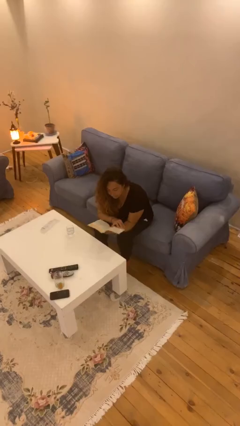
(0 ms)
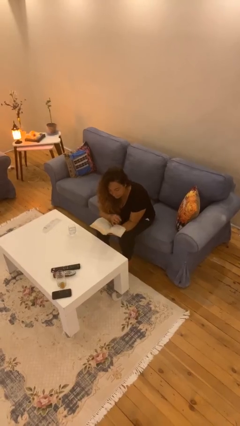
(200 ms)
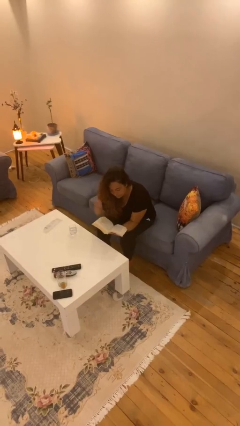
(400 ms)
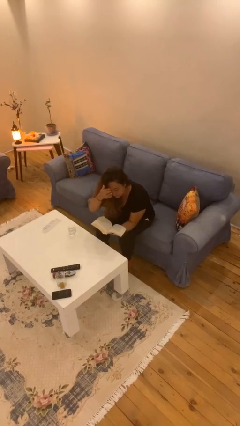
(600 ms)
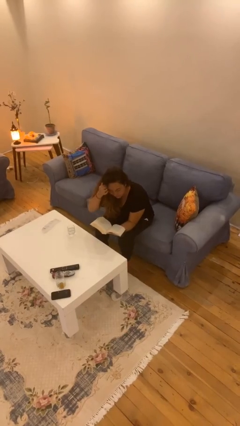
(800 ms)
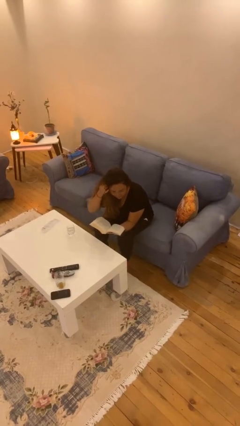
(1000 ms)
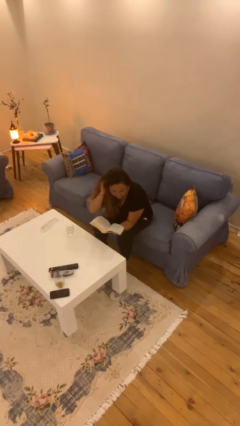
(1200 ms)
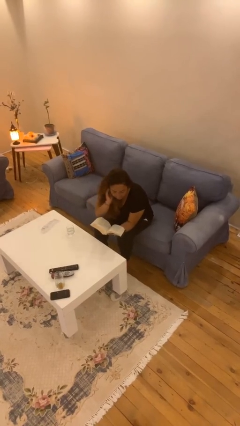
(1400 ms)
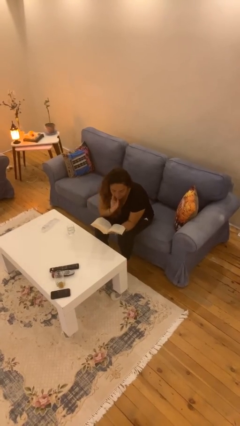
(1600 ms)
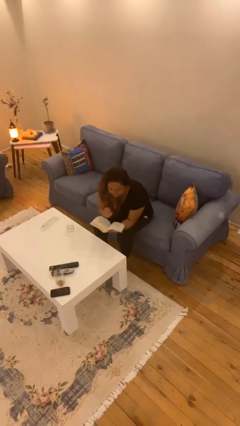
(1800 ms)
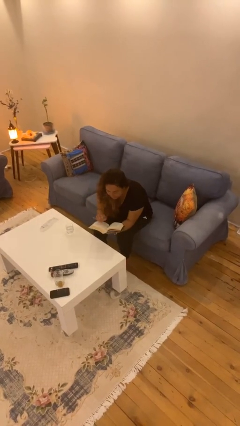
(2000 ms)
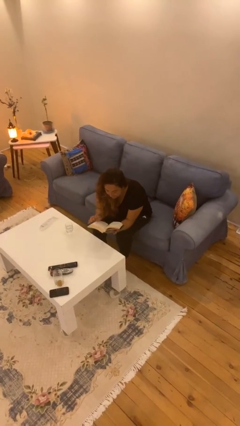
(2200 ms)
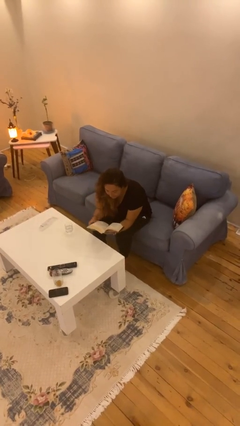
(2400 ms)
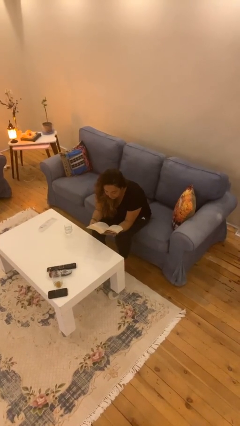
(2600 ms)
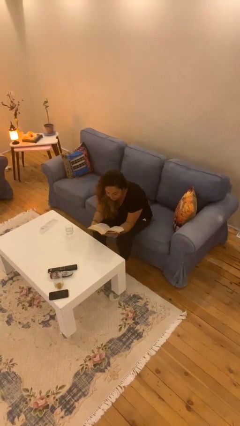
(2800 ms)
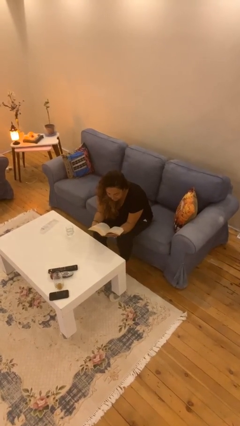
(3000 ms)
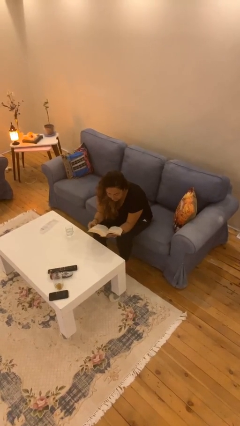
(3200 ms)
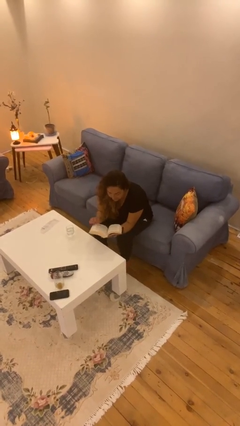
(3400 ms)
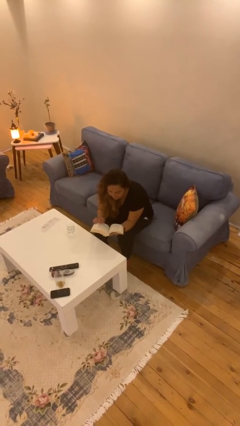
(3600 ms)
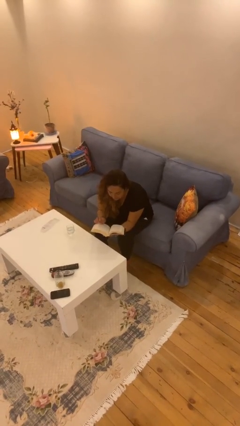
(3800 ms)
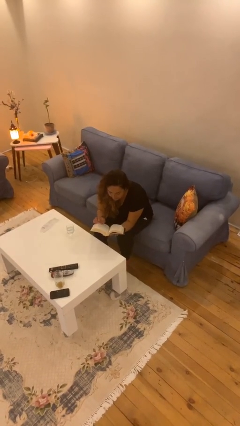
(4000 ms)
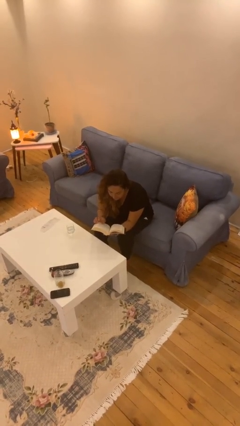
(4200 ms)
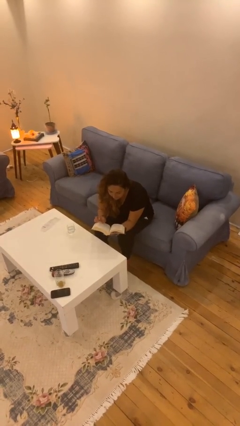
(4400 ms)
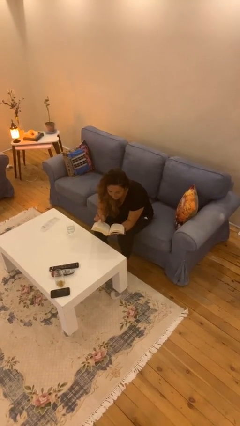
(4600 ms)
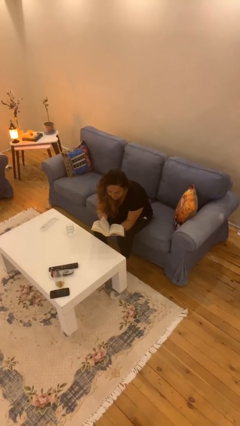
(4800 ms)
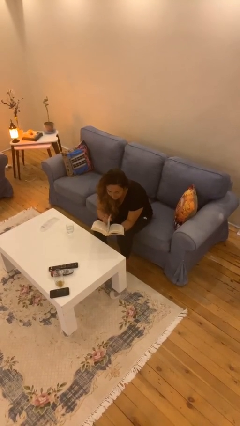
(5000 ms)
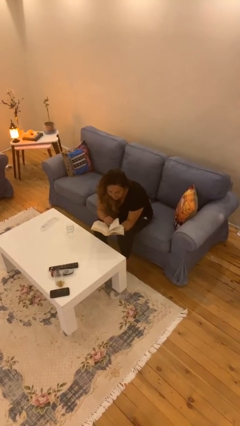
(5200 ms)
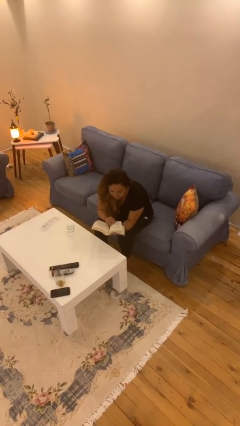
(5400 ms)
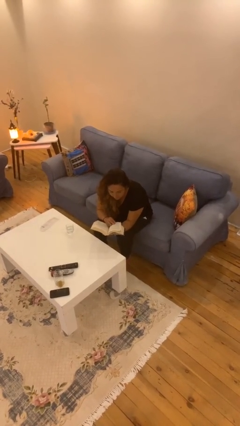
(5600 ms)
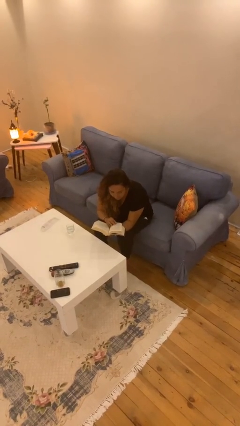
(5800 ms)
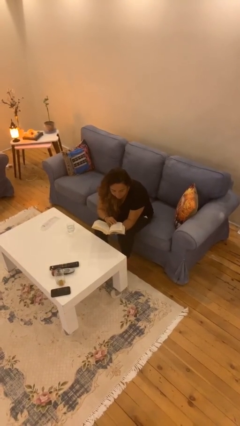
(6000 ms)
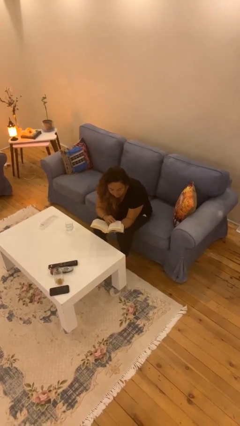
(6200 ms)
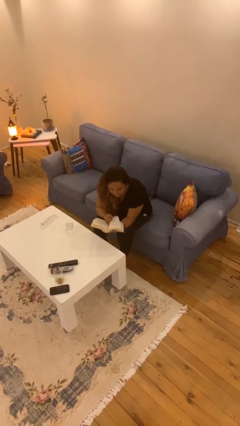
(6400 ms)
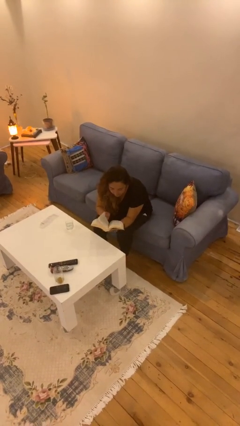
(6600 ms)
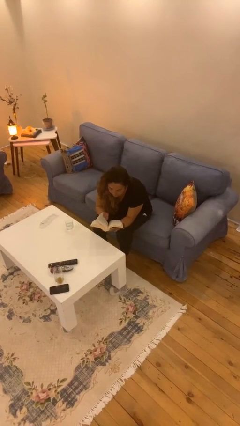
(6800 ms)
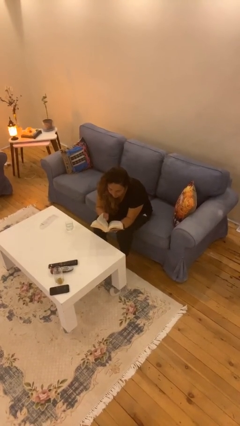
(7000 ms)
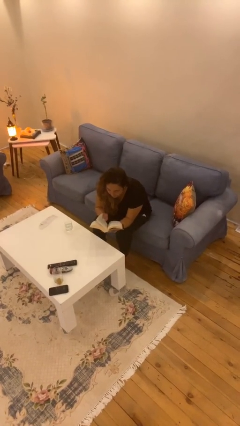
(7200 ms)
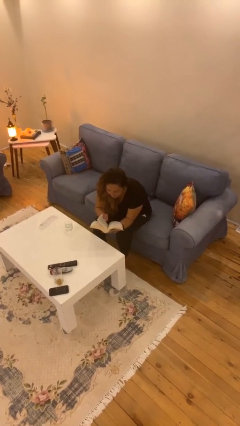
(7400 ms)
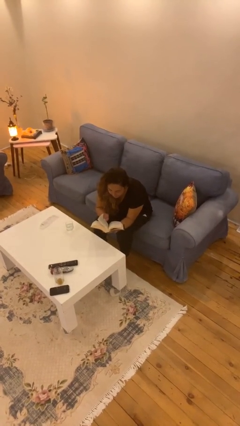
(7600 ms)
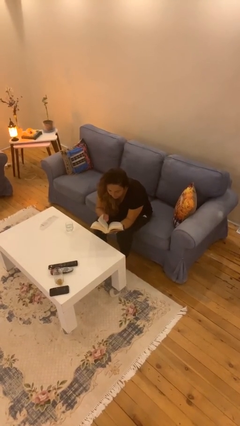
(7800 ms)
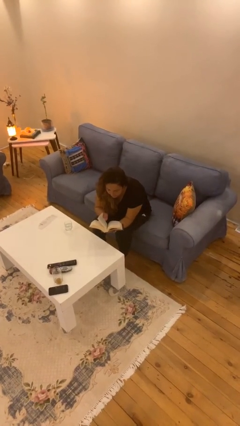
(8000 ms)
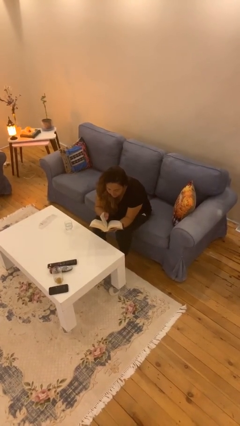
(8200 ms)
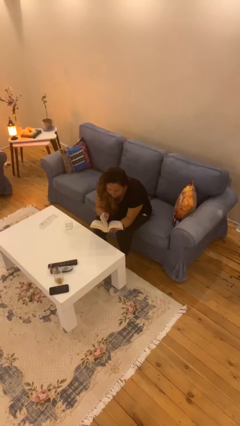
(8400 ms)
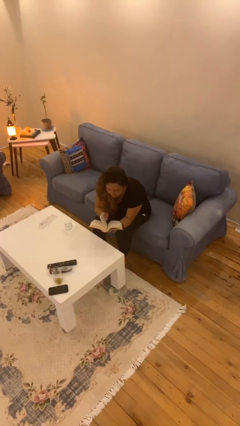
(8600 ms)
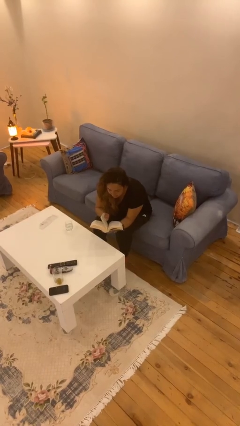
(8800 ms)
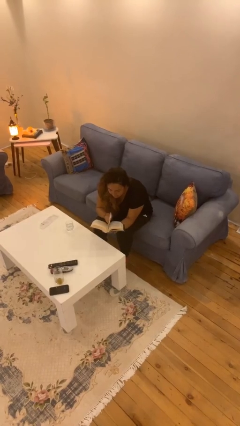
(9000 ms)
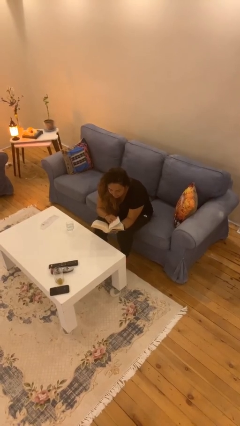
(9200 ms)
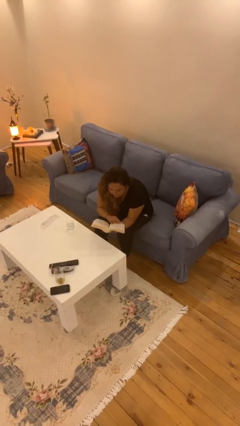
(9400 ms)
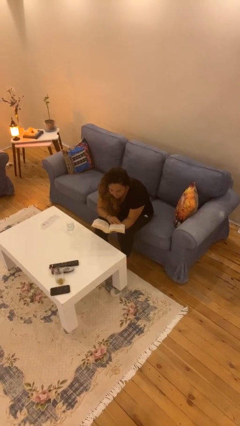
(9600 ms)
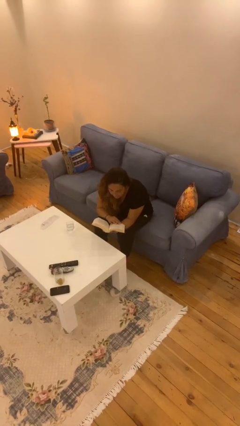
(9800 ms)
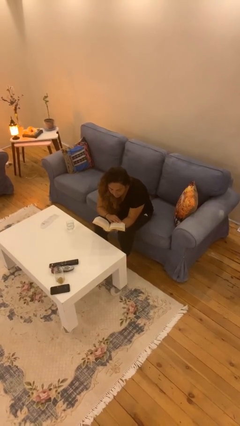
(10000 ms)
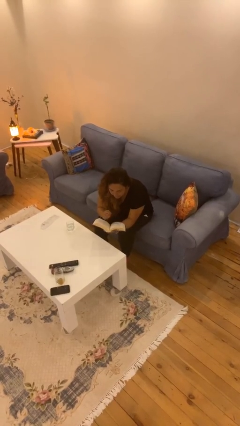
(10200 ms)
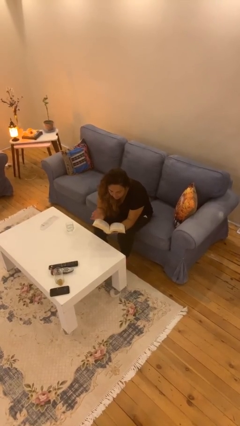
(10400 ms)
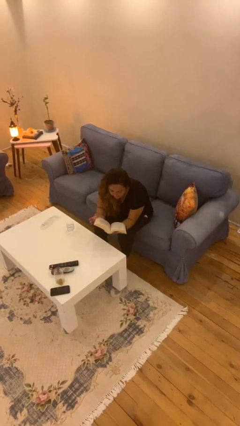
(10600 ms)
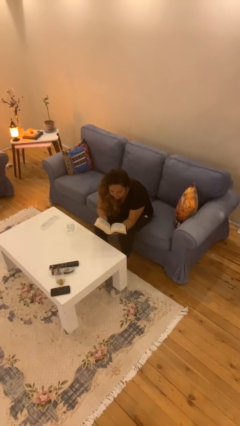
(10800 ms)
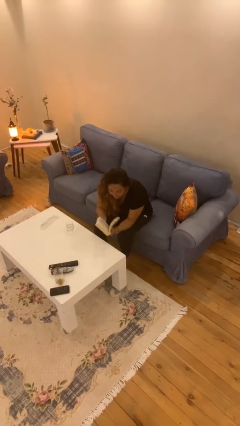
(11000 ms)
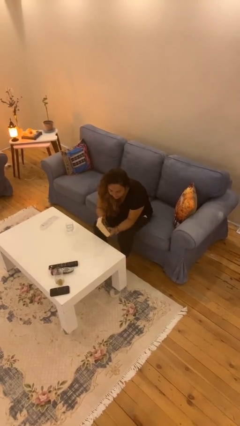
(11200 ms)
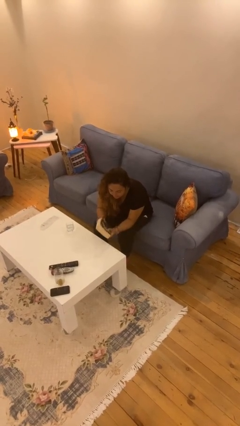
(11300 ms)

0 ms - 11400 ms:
person reads document

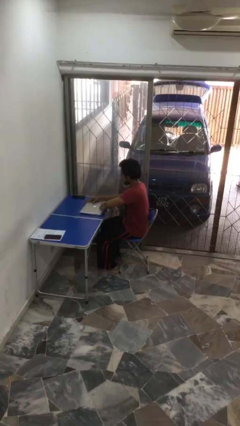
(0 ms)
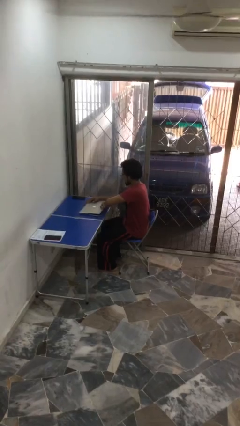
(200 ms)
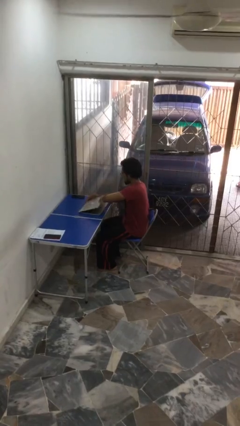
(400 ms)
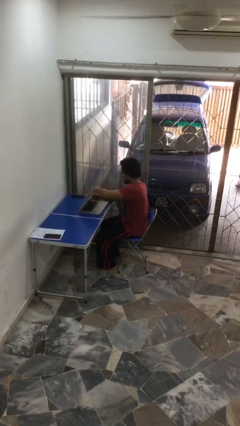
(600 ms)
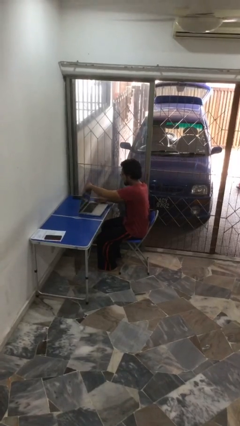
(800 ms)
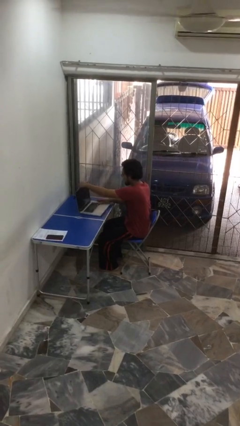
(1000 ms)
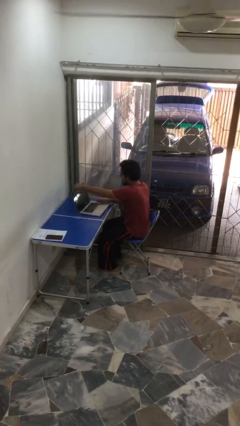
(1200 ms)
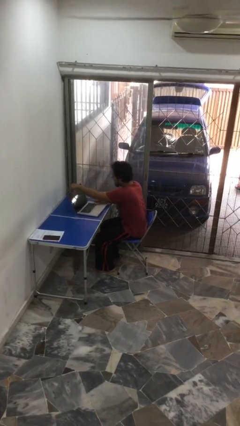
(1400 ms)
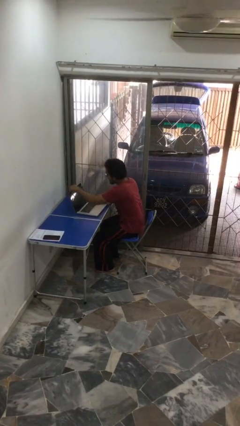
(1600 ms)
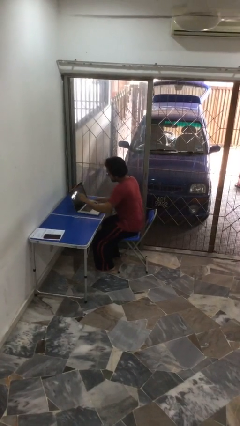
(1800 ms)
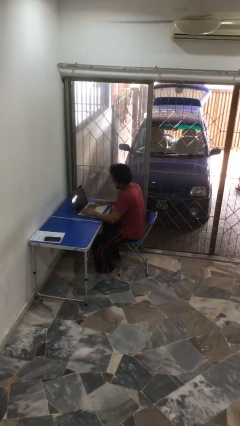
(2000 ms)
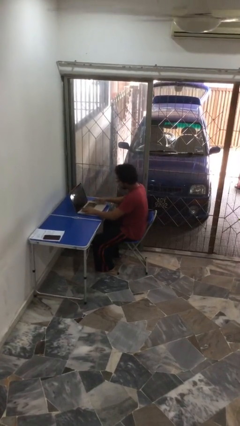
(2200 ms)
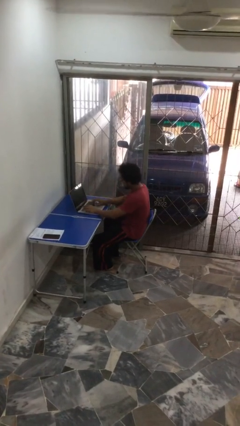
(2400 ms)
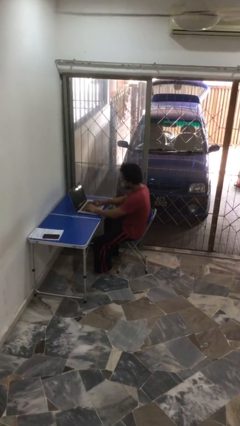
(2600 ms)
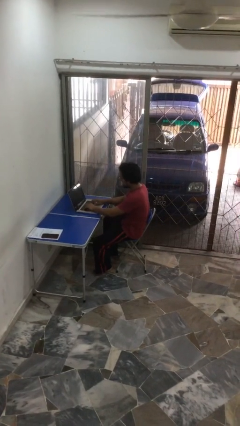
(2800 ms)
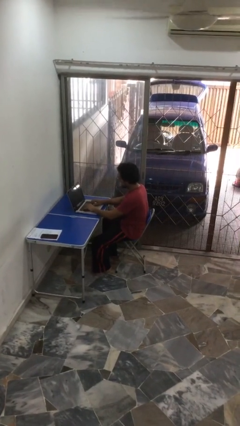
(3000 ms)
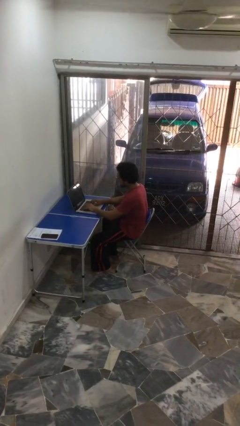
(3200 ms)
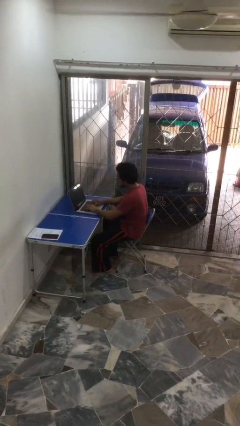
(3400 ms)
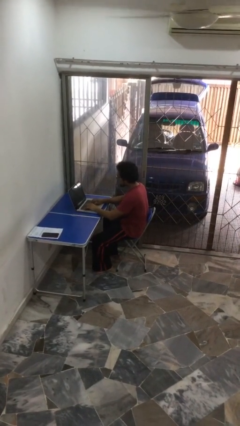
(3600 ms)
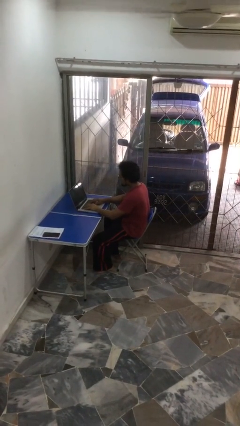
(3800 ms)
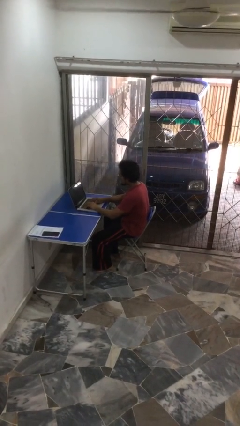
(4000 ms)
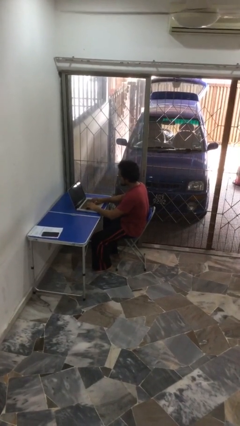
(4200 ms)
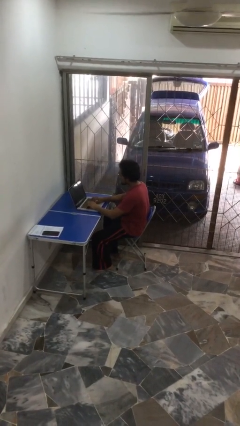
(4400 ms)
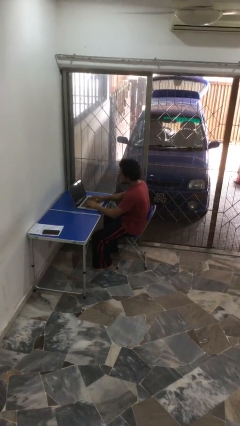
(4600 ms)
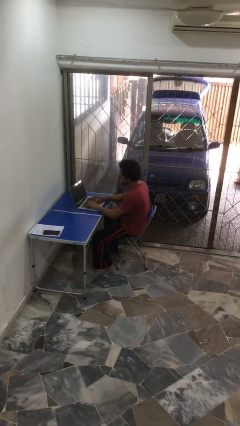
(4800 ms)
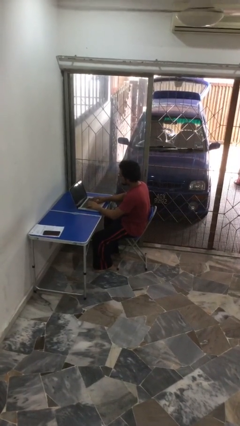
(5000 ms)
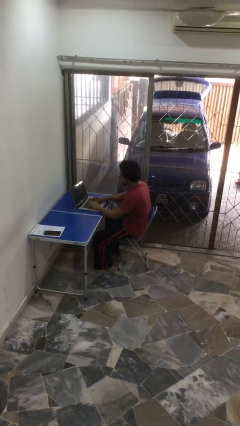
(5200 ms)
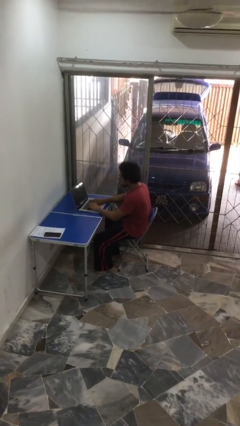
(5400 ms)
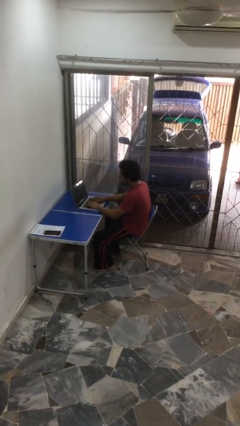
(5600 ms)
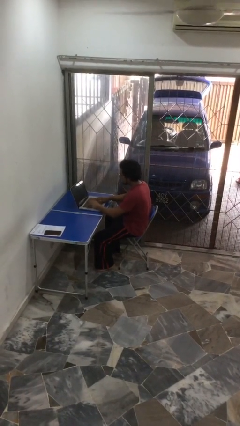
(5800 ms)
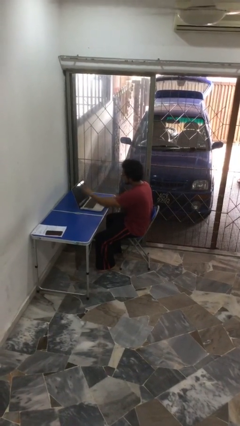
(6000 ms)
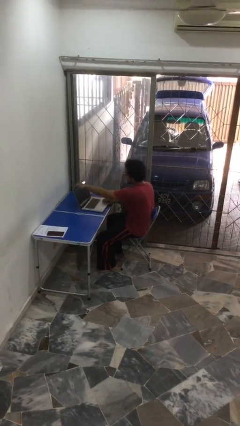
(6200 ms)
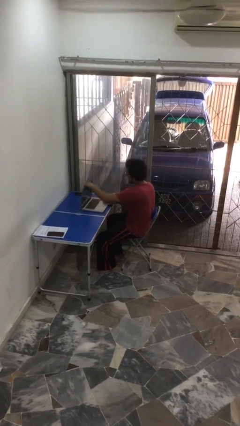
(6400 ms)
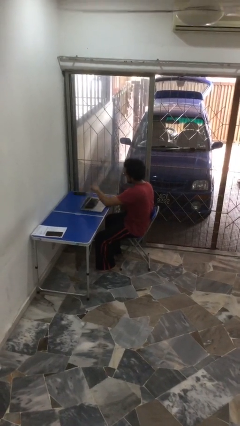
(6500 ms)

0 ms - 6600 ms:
person interacts with laptop

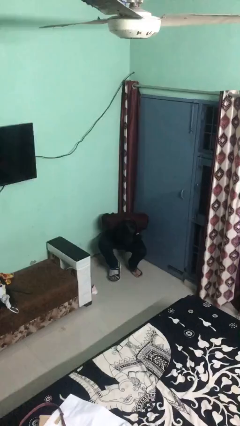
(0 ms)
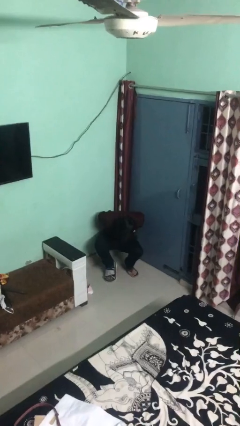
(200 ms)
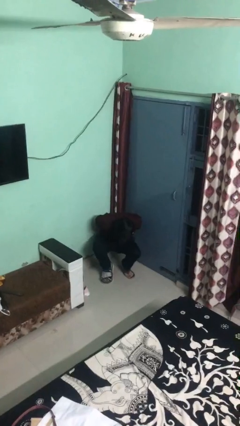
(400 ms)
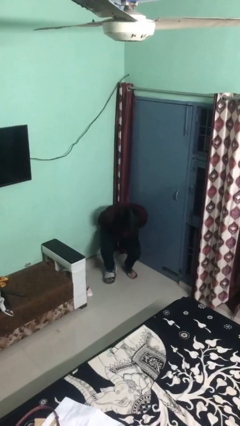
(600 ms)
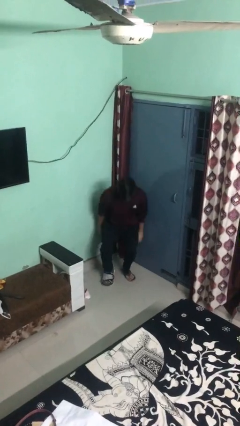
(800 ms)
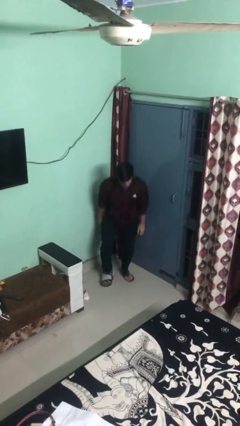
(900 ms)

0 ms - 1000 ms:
person stands up
